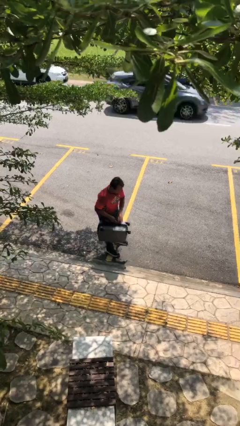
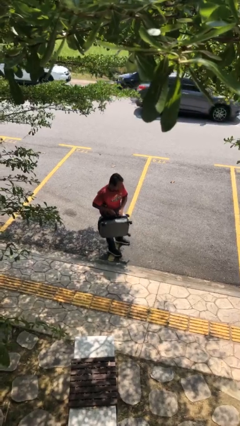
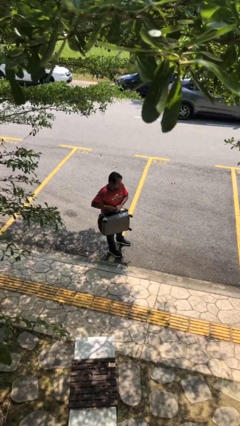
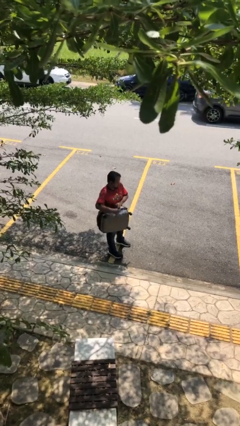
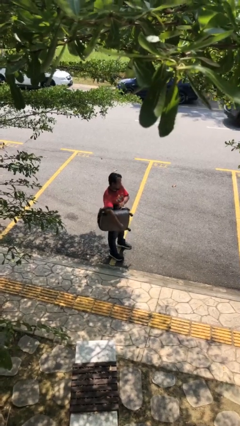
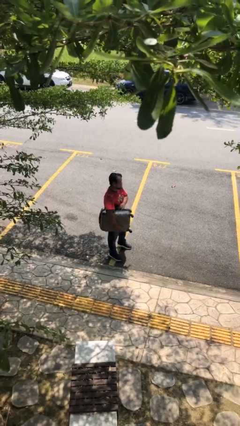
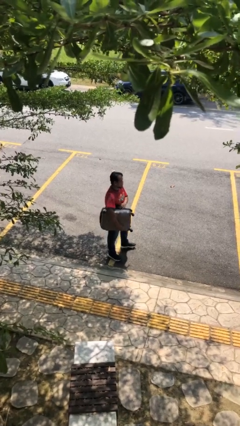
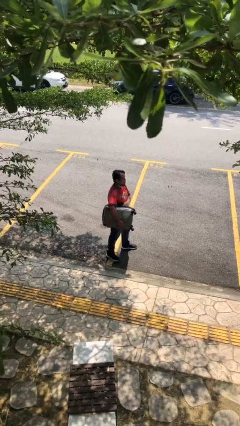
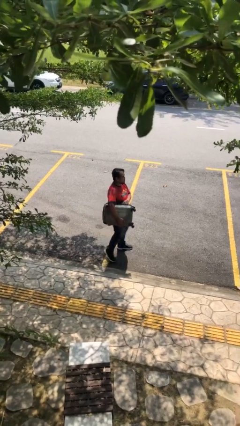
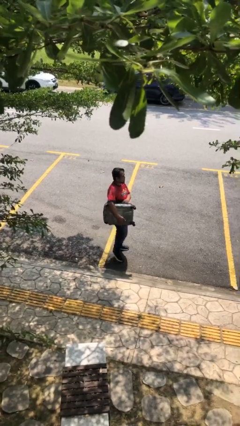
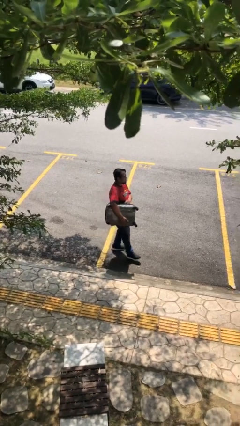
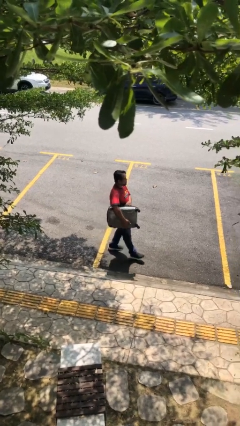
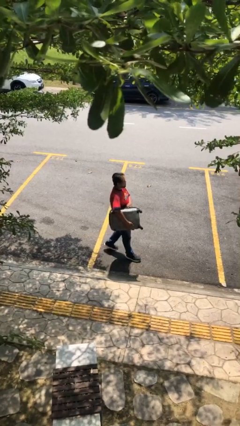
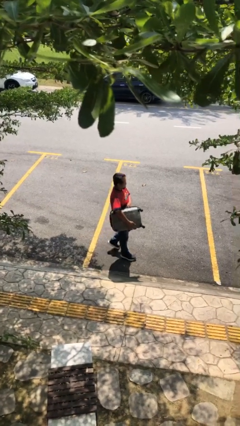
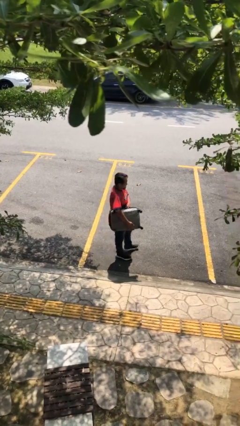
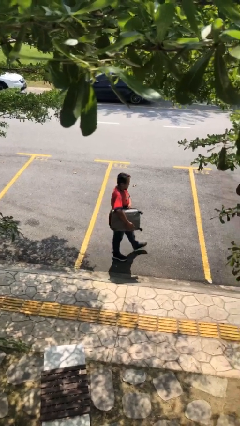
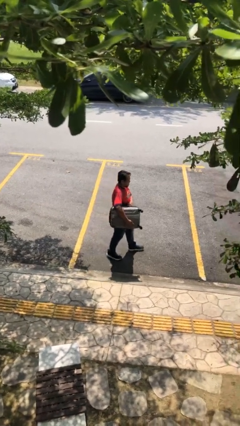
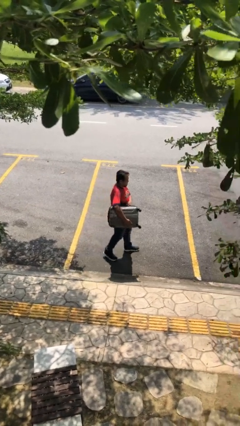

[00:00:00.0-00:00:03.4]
person carries heavy object

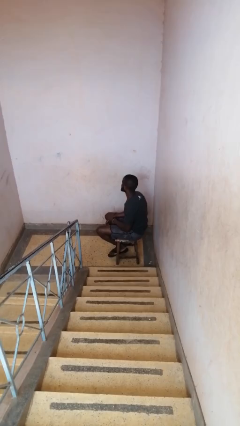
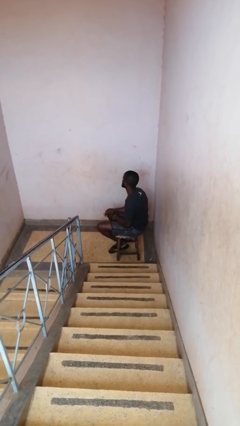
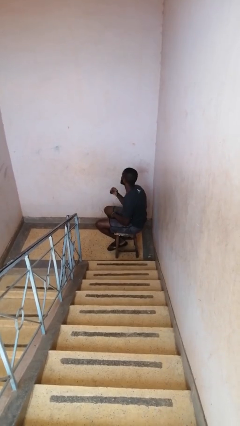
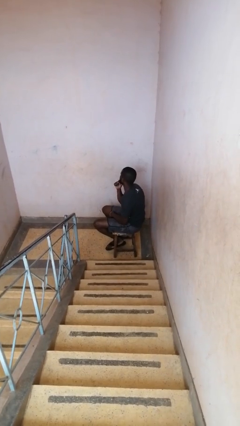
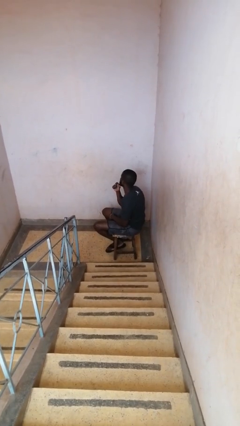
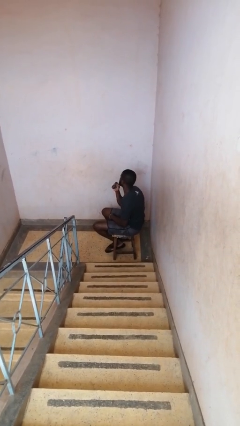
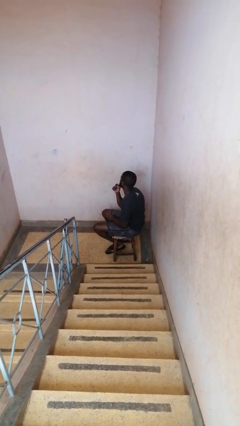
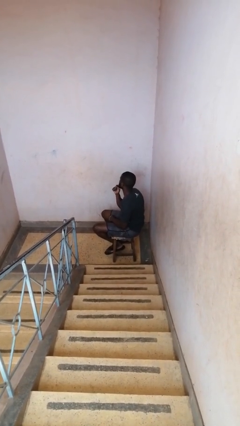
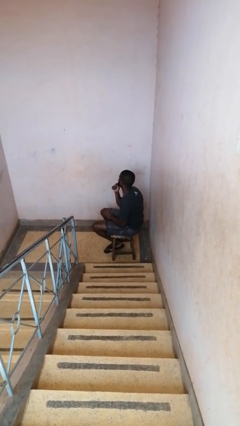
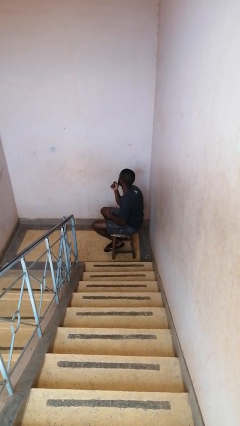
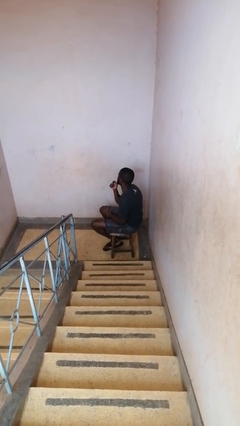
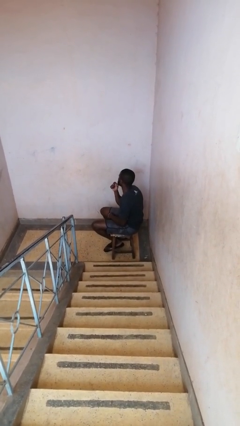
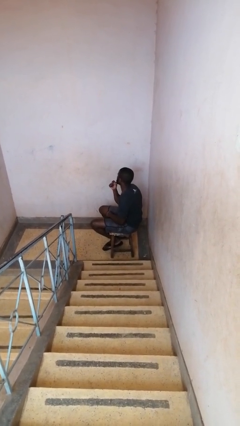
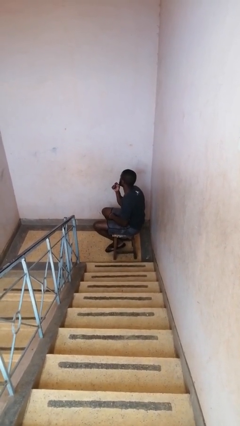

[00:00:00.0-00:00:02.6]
person strokes chin

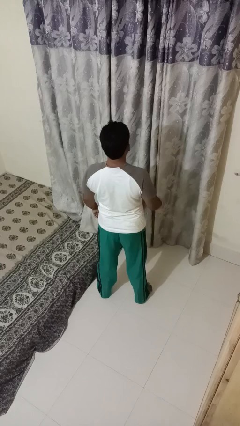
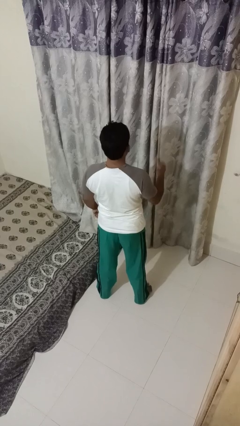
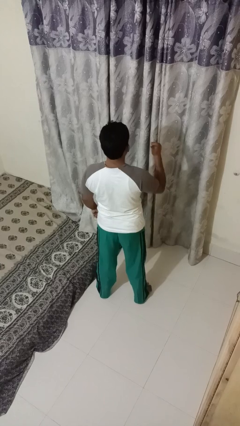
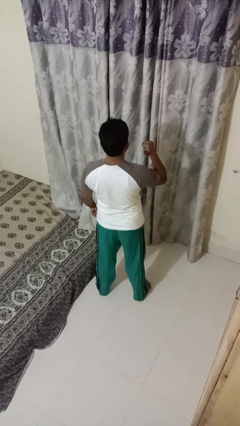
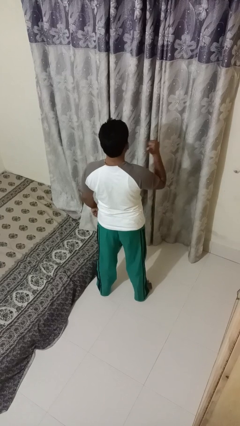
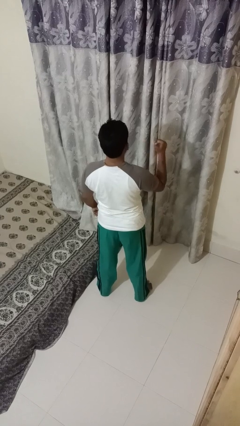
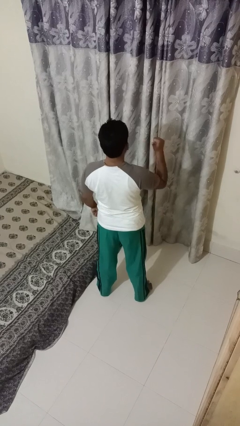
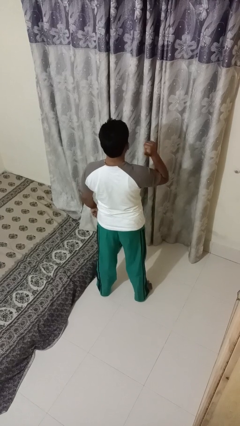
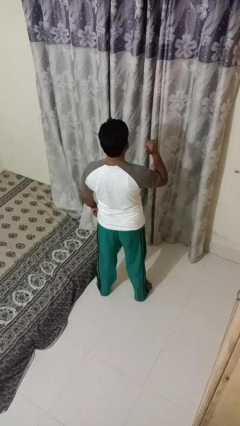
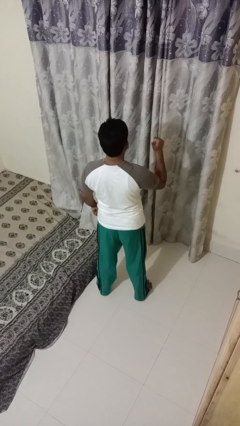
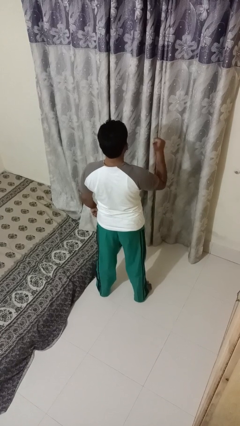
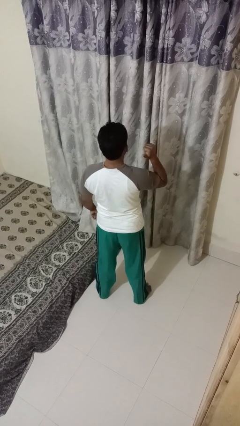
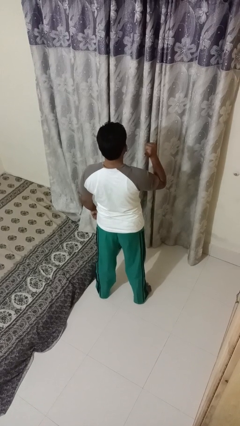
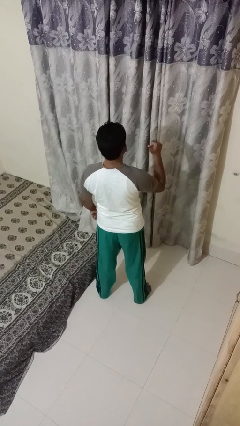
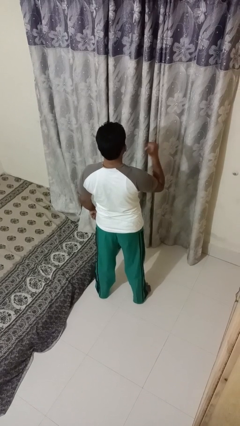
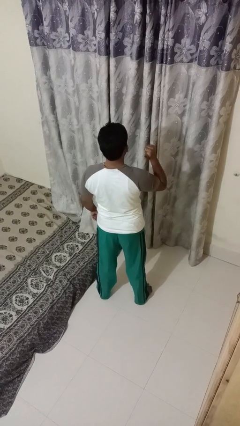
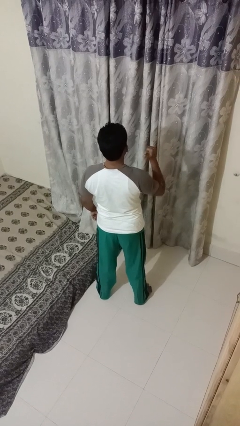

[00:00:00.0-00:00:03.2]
person gestures behind me

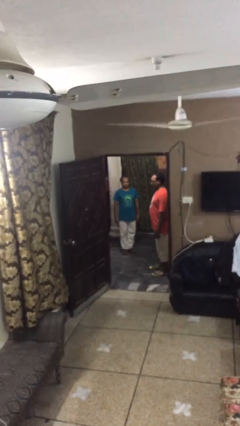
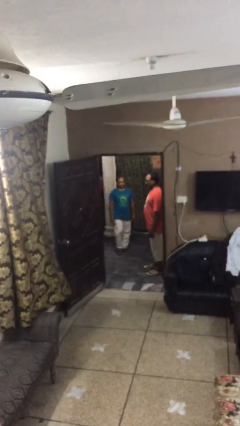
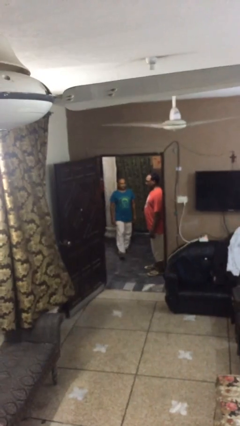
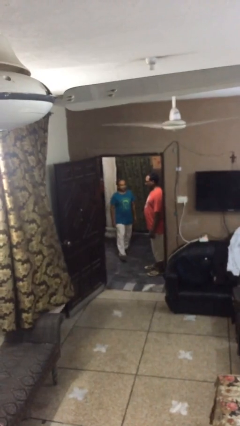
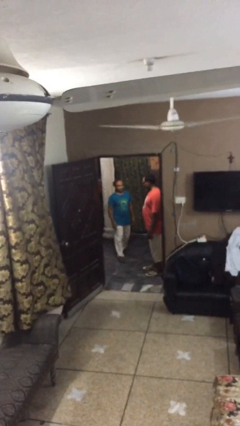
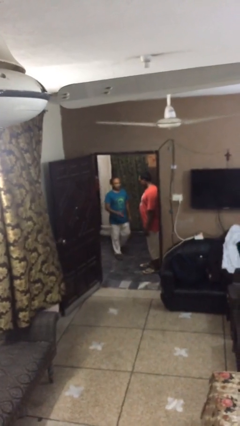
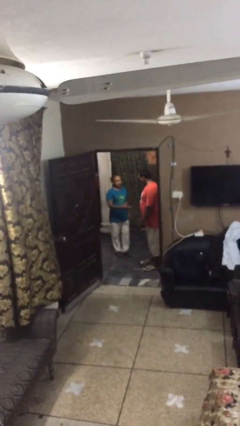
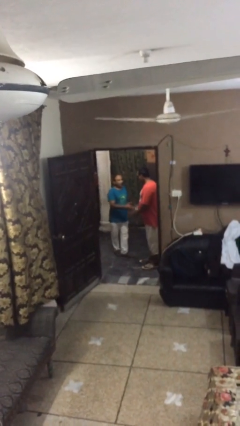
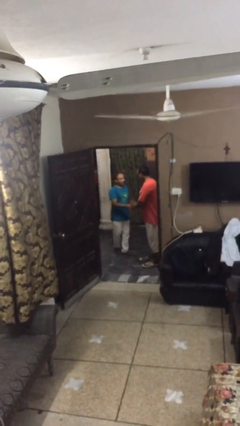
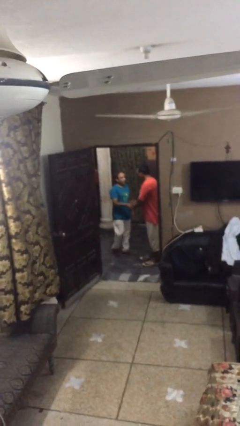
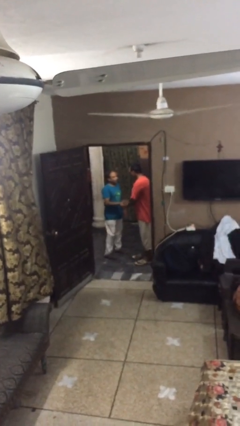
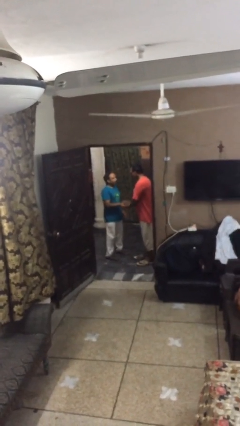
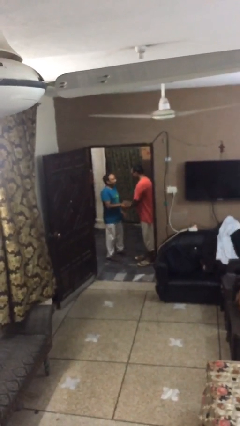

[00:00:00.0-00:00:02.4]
person shakes hand

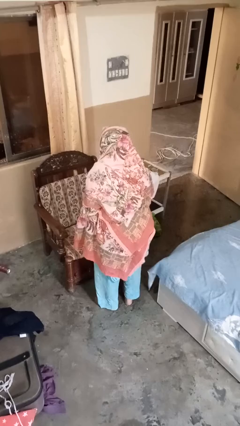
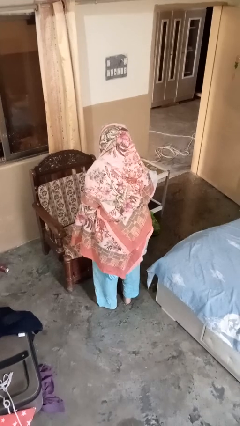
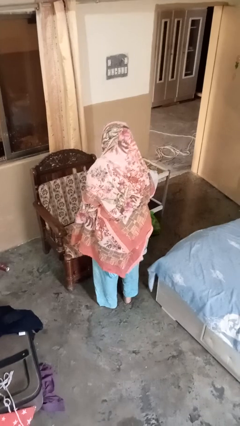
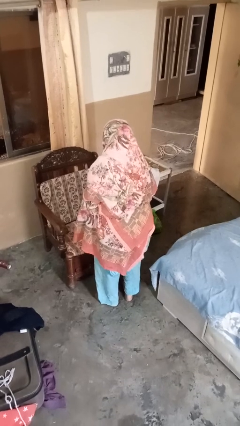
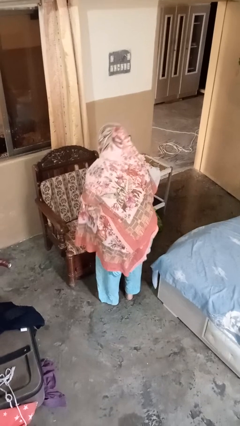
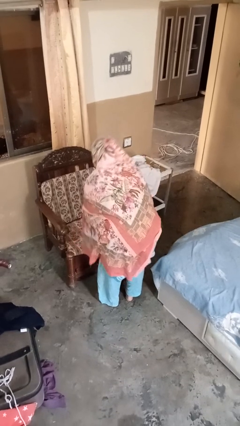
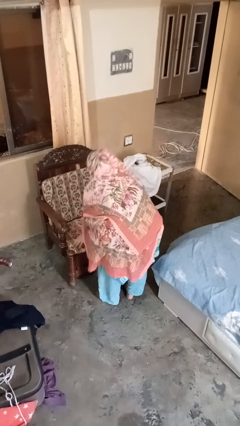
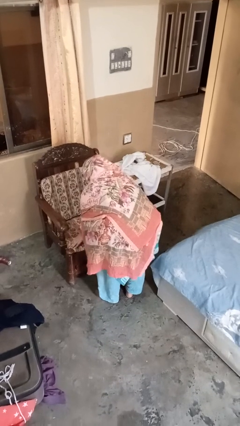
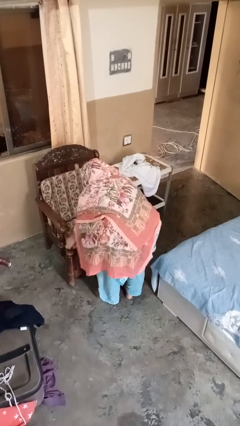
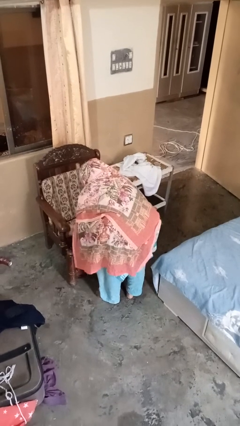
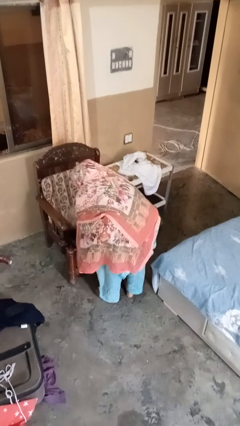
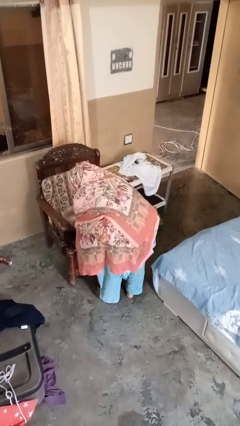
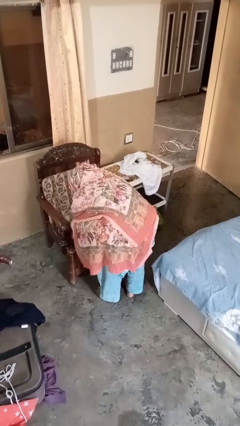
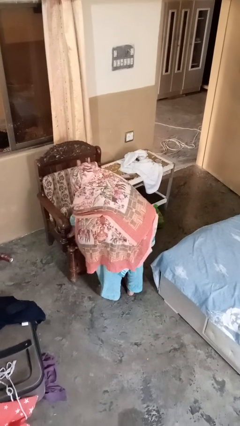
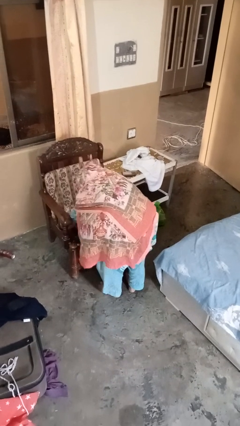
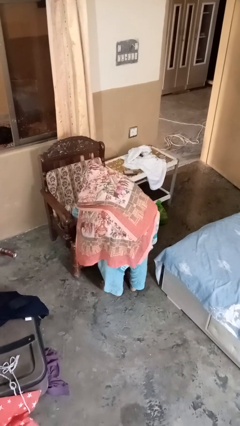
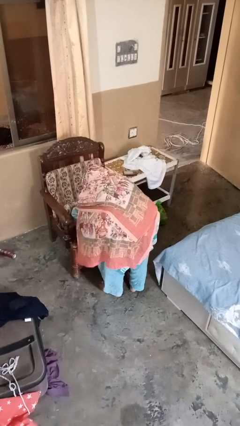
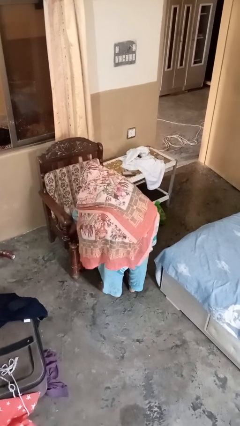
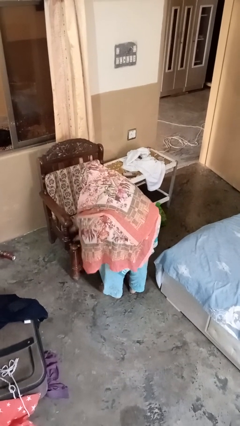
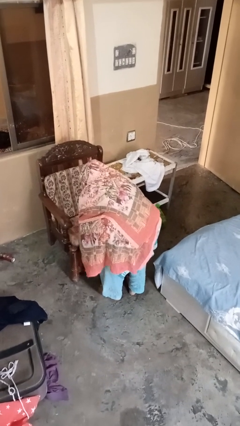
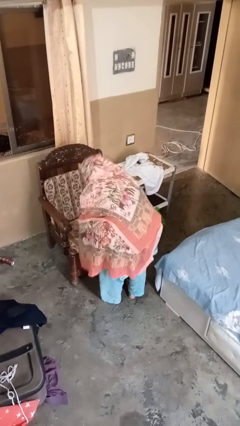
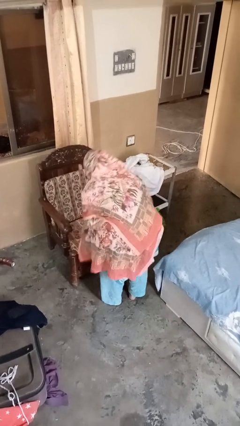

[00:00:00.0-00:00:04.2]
person searches under couch

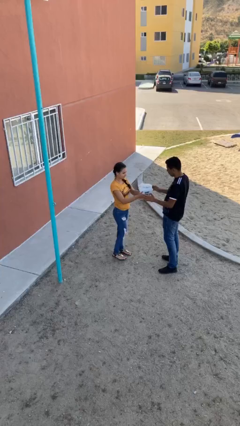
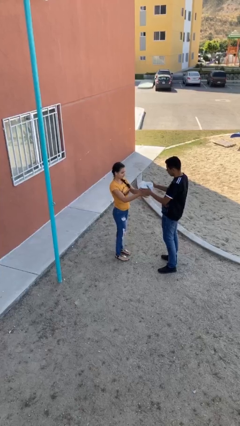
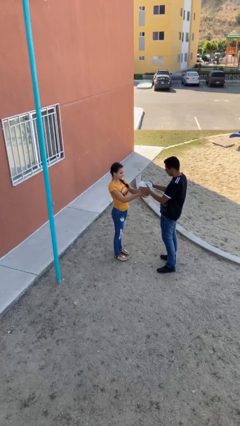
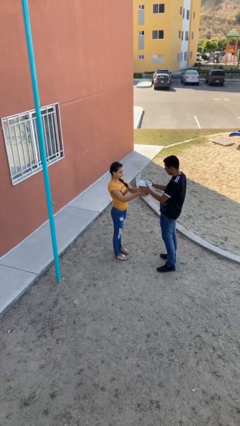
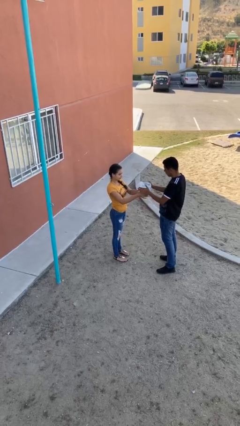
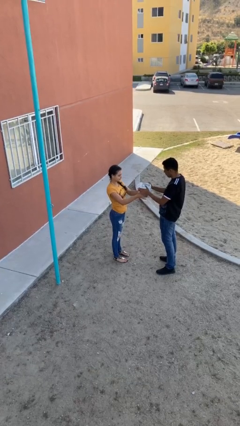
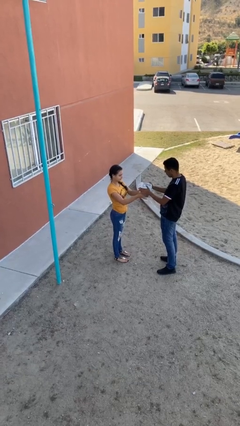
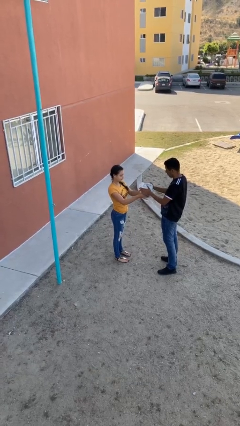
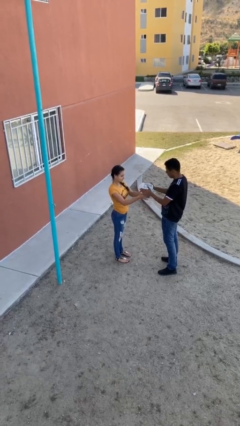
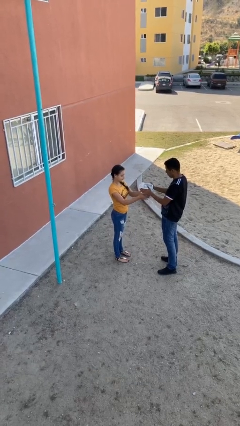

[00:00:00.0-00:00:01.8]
person transfers object to person

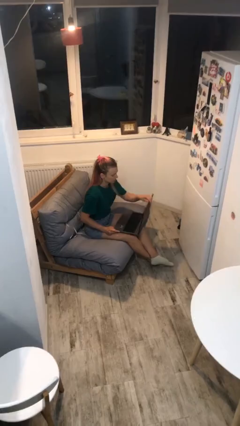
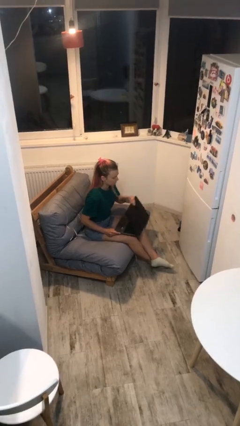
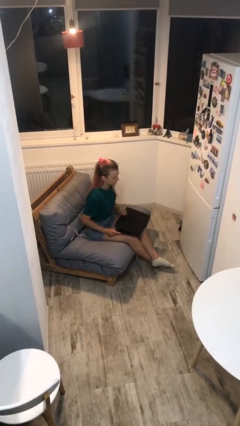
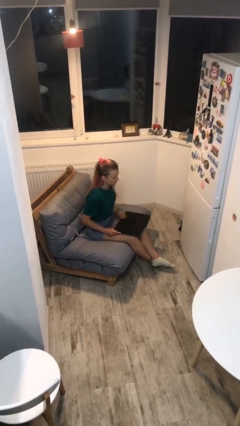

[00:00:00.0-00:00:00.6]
person closes laptop
